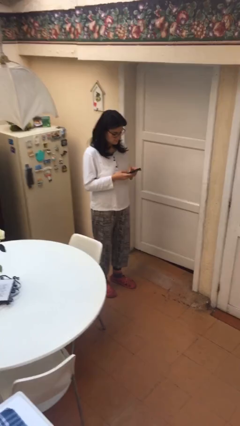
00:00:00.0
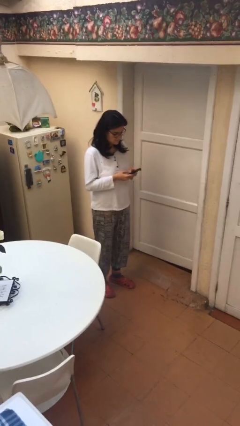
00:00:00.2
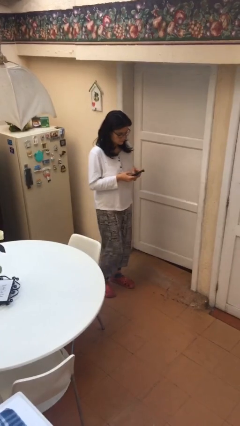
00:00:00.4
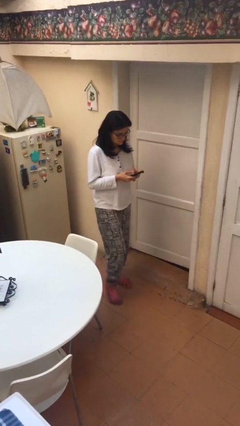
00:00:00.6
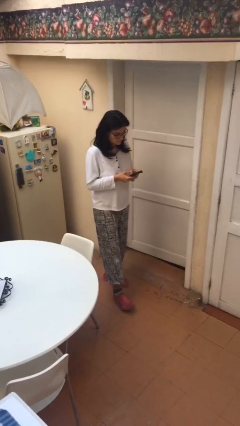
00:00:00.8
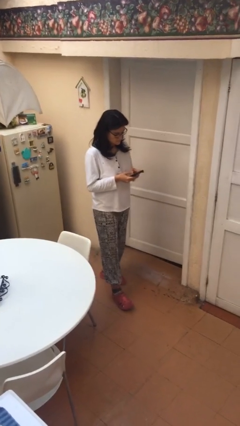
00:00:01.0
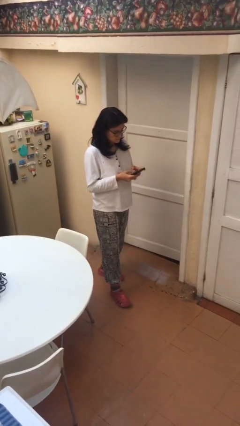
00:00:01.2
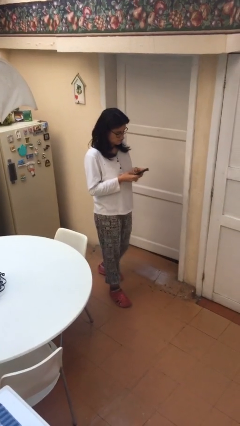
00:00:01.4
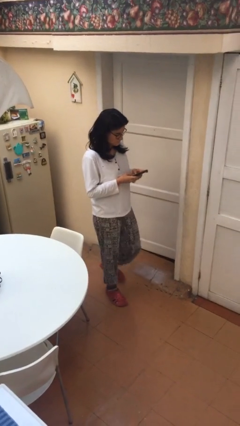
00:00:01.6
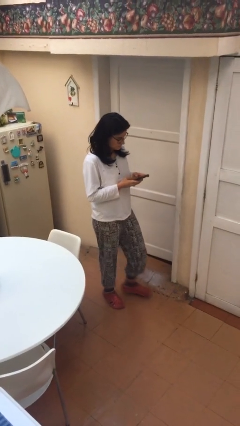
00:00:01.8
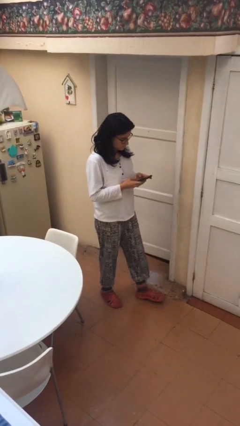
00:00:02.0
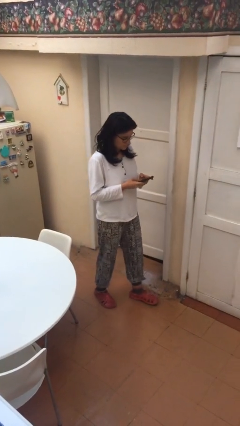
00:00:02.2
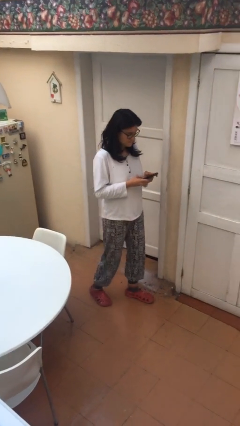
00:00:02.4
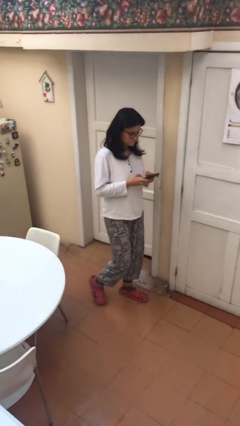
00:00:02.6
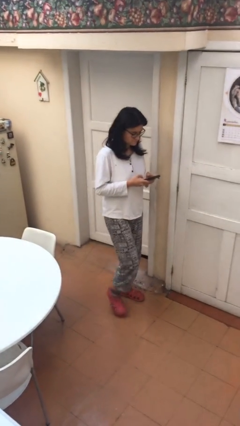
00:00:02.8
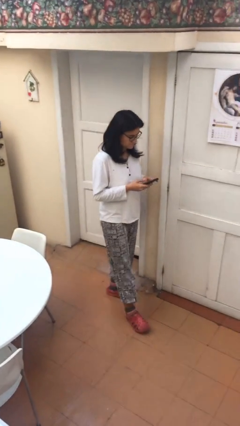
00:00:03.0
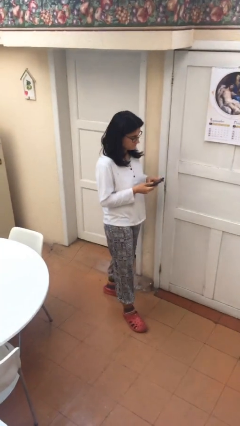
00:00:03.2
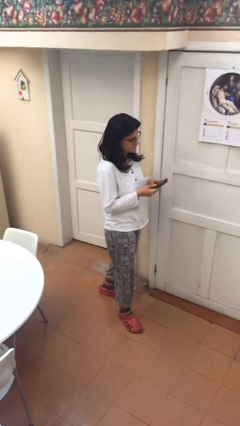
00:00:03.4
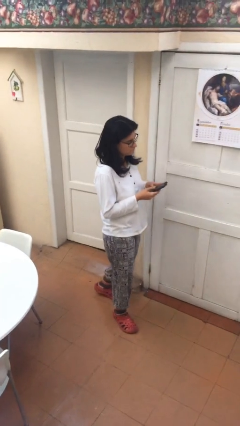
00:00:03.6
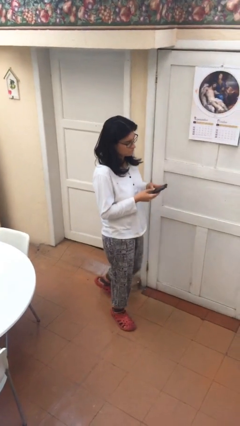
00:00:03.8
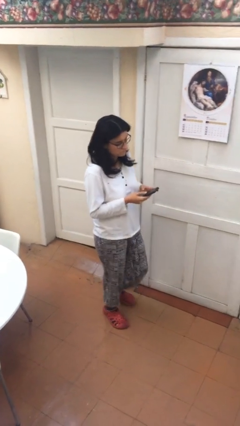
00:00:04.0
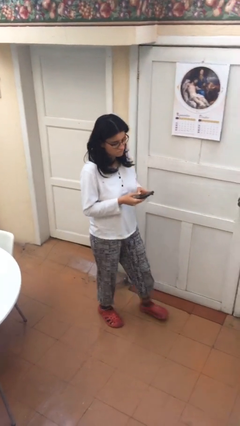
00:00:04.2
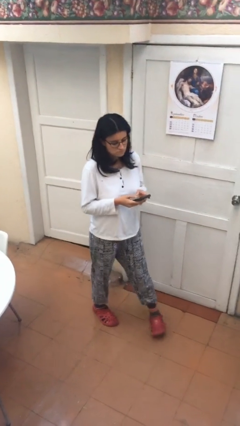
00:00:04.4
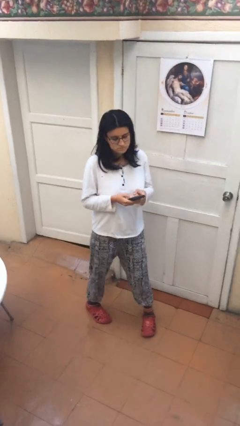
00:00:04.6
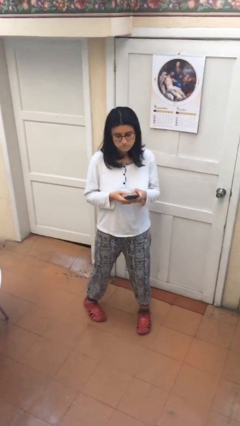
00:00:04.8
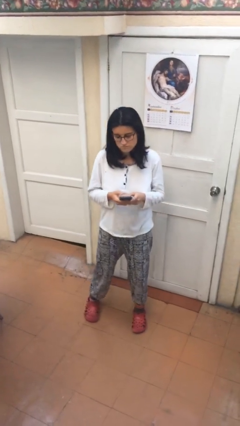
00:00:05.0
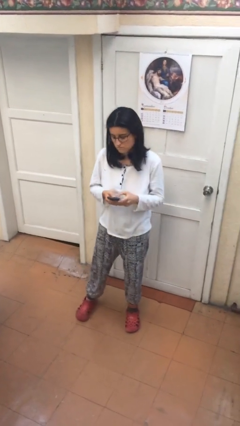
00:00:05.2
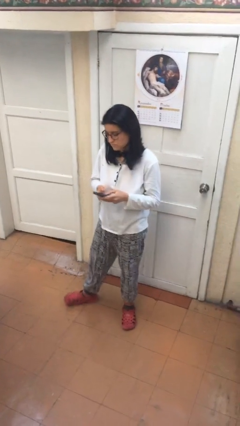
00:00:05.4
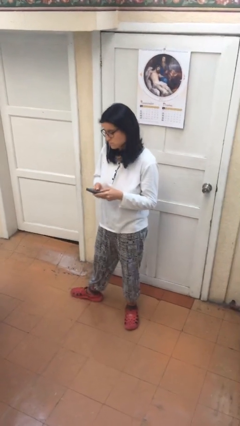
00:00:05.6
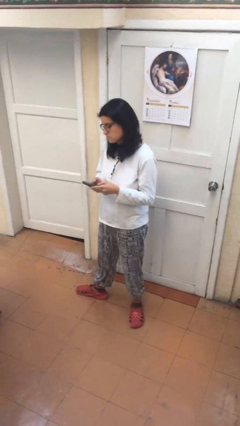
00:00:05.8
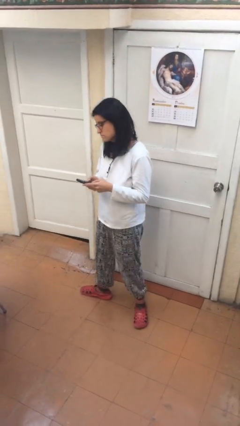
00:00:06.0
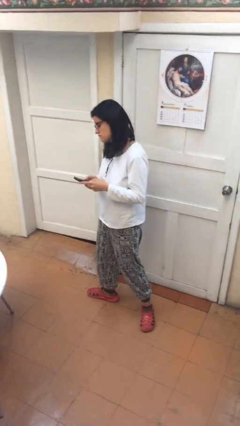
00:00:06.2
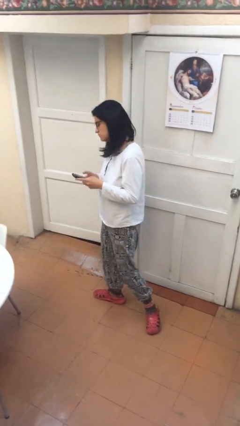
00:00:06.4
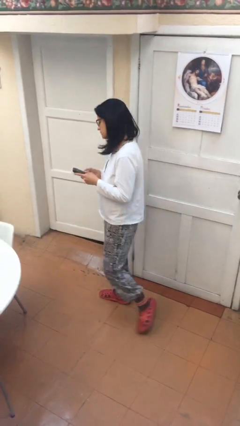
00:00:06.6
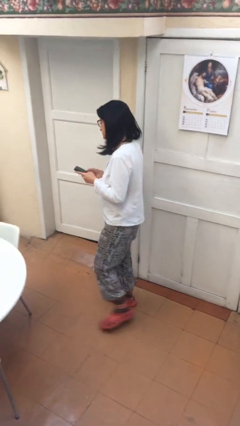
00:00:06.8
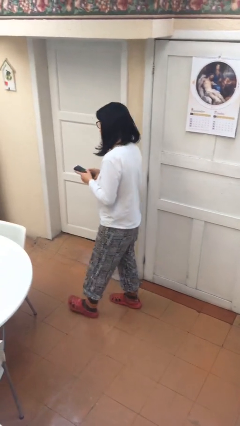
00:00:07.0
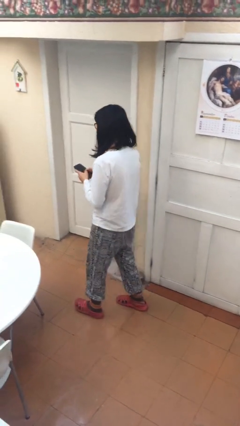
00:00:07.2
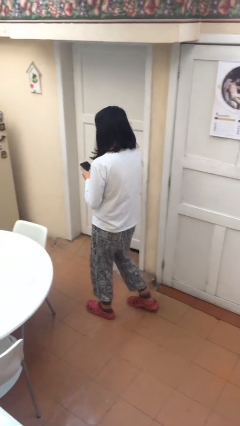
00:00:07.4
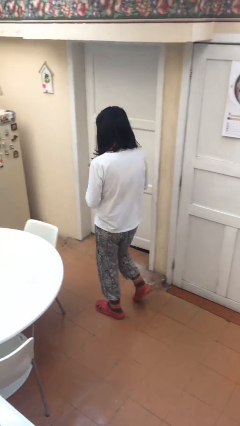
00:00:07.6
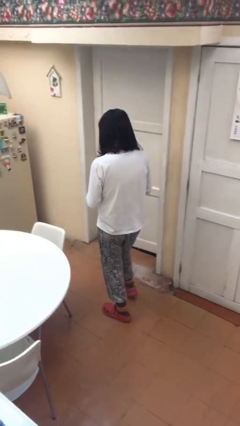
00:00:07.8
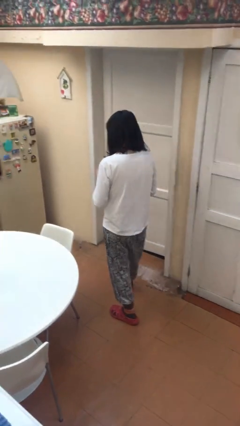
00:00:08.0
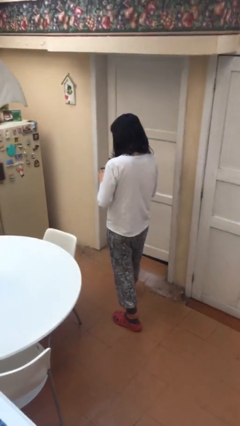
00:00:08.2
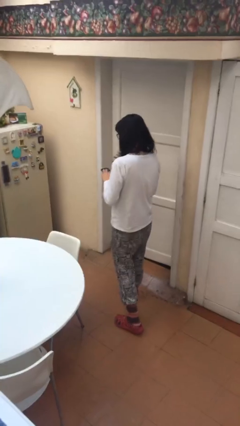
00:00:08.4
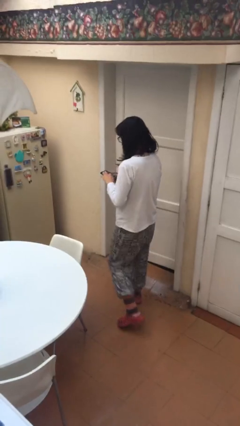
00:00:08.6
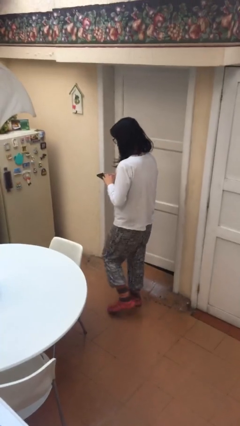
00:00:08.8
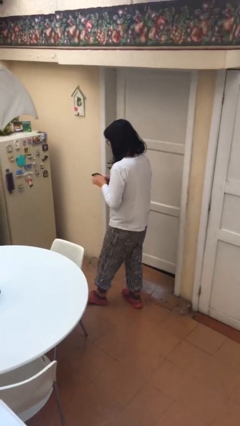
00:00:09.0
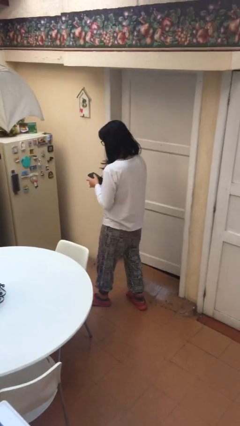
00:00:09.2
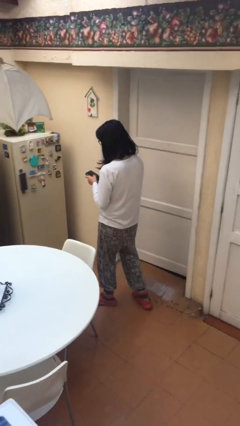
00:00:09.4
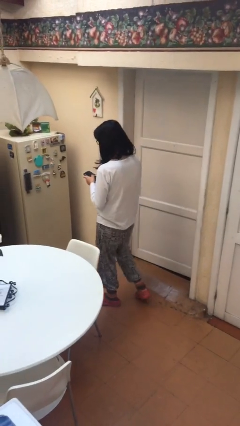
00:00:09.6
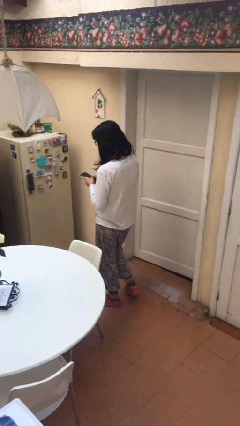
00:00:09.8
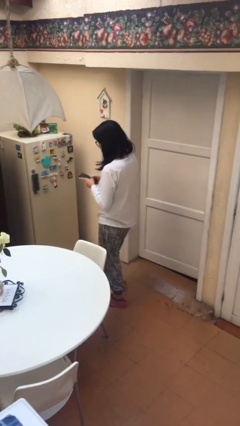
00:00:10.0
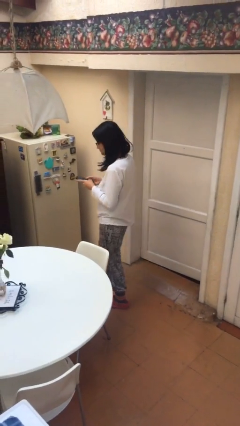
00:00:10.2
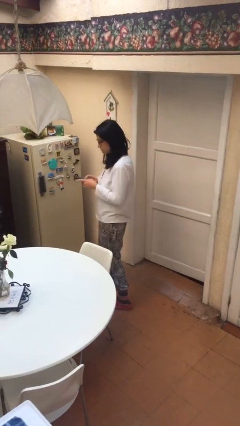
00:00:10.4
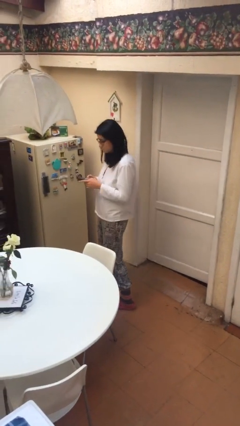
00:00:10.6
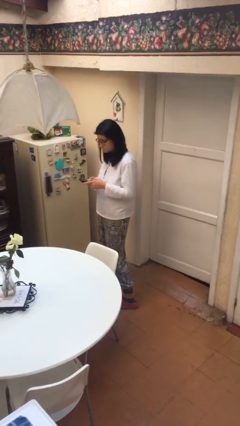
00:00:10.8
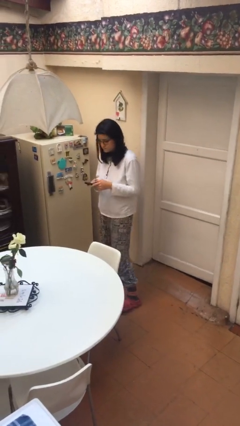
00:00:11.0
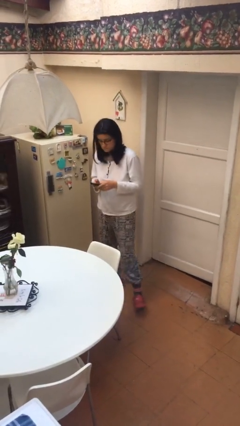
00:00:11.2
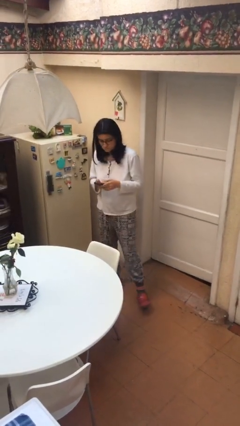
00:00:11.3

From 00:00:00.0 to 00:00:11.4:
person texts on phone

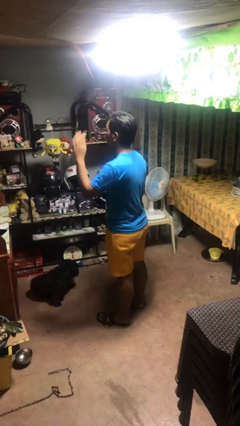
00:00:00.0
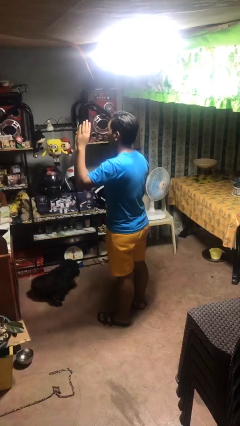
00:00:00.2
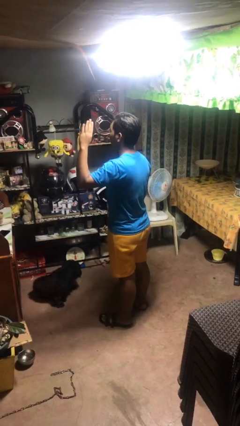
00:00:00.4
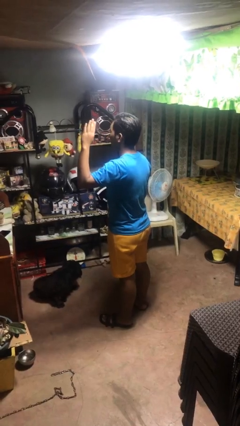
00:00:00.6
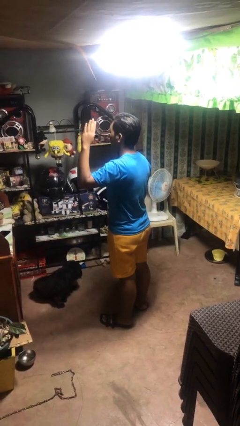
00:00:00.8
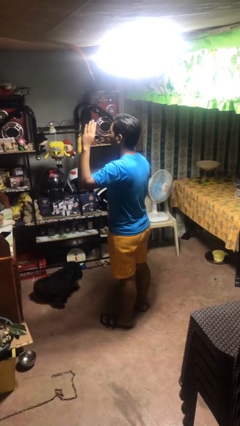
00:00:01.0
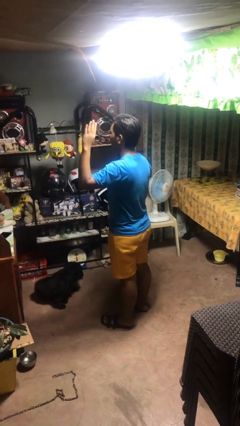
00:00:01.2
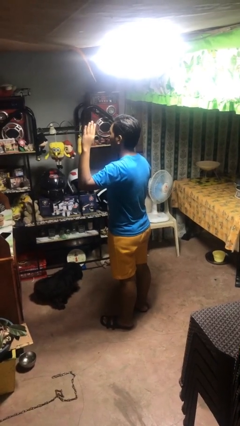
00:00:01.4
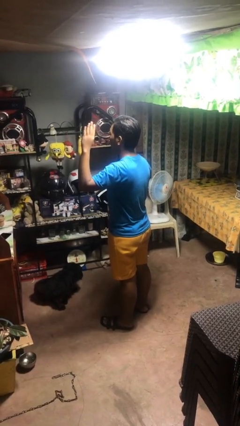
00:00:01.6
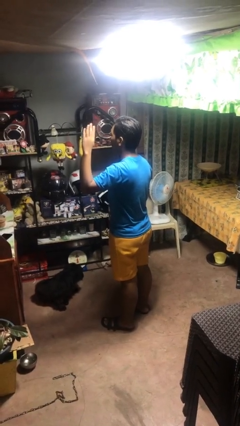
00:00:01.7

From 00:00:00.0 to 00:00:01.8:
person gestures raise hand

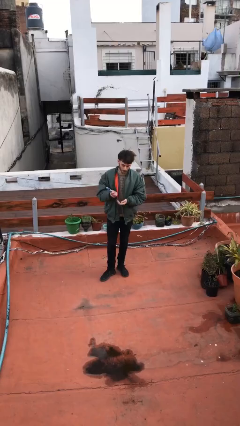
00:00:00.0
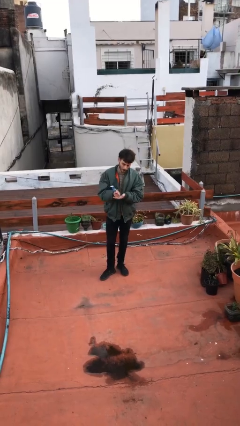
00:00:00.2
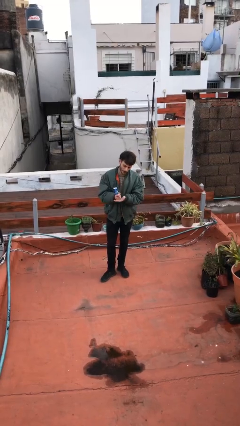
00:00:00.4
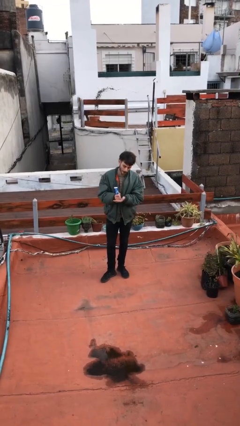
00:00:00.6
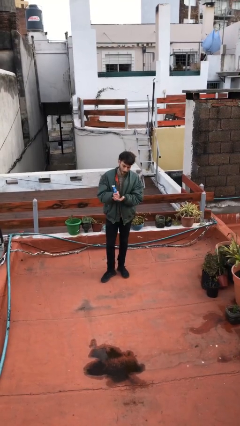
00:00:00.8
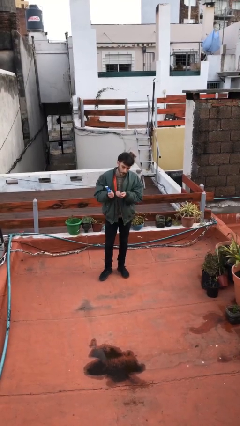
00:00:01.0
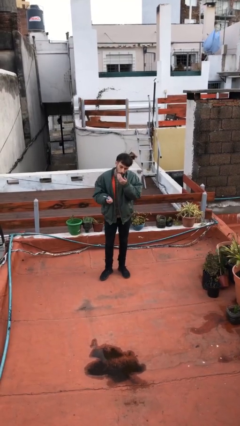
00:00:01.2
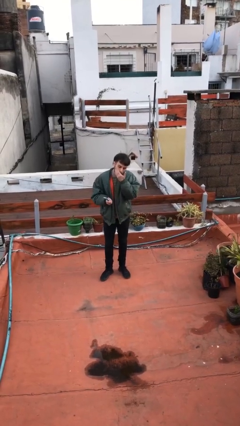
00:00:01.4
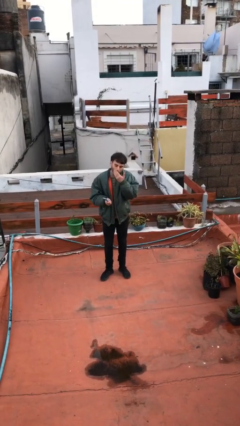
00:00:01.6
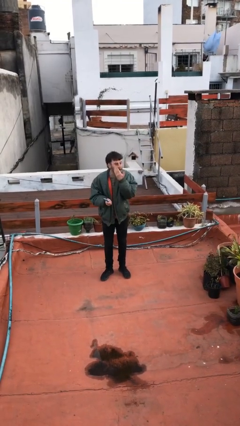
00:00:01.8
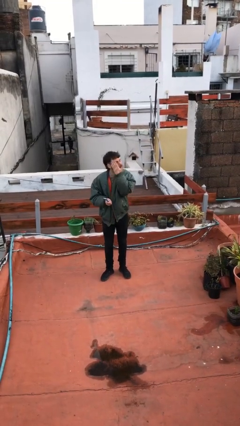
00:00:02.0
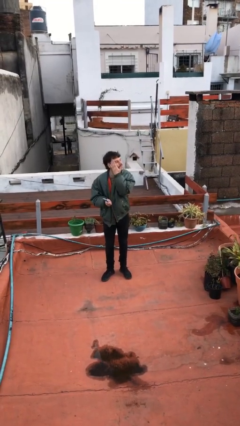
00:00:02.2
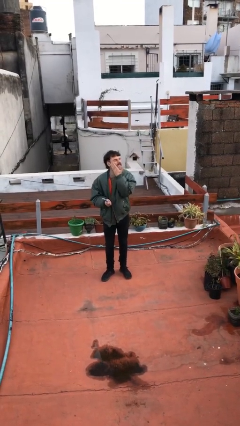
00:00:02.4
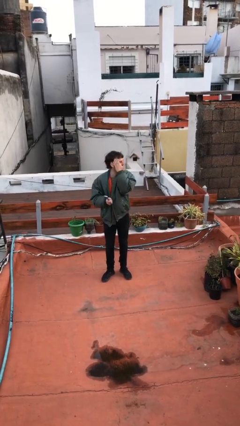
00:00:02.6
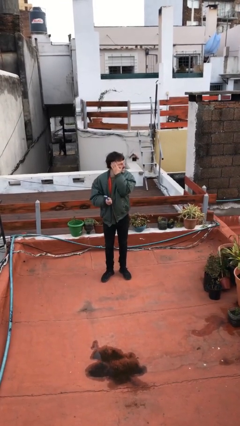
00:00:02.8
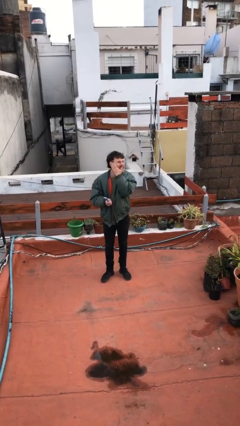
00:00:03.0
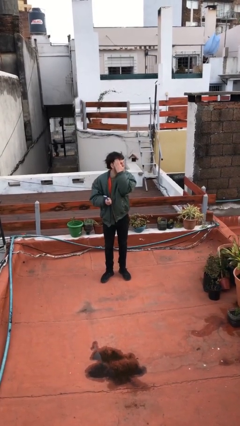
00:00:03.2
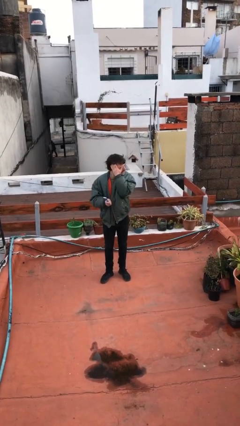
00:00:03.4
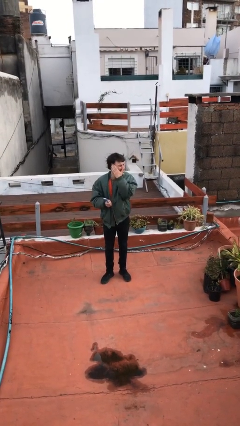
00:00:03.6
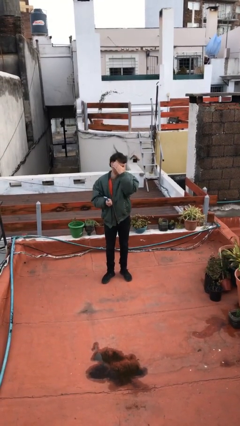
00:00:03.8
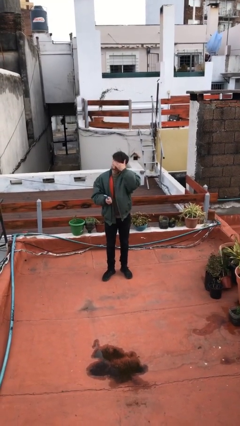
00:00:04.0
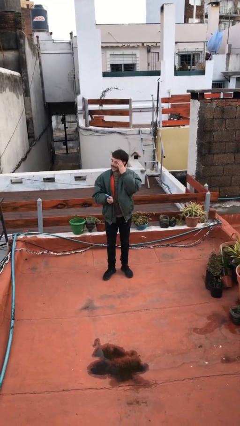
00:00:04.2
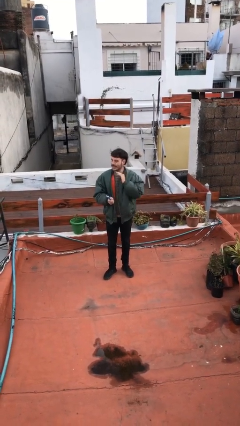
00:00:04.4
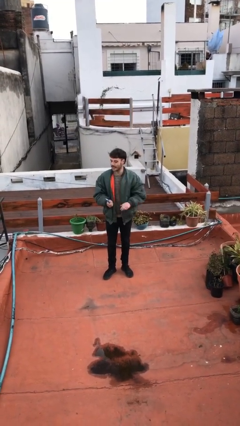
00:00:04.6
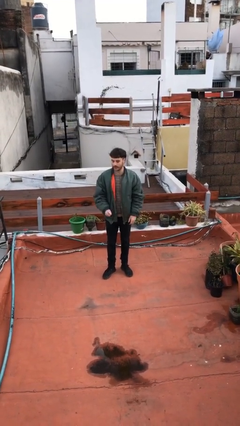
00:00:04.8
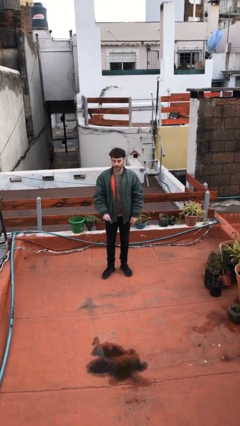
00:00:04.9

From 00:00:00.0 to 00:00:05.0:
person applies facial moisturizer
